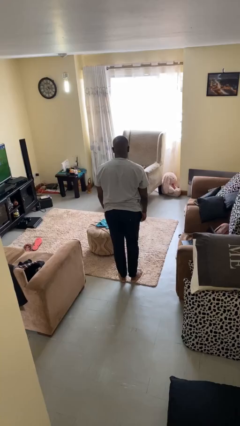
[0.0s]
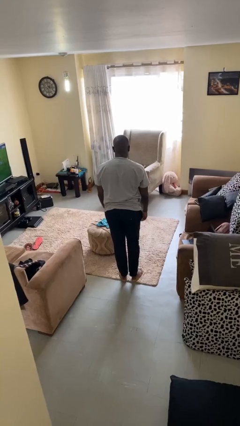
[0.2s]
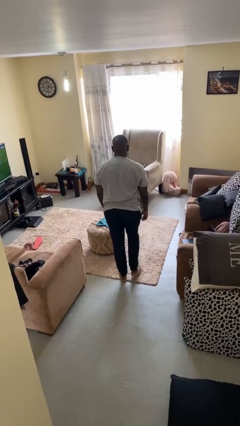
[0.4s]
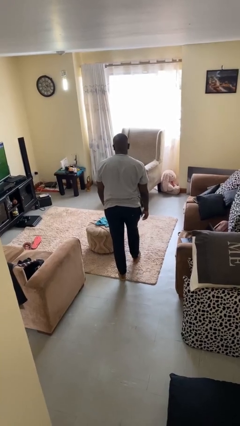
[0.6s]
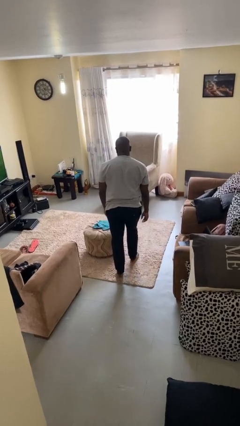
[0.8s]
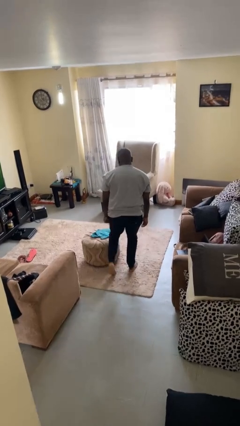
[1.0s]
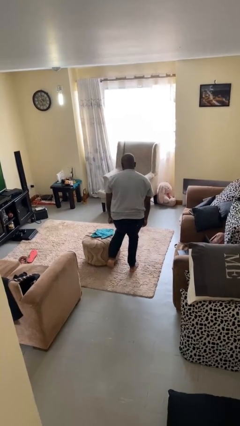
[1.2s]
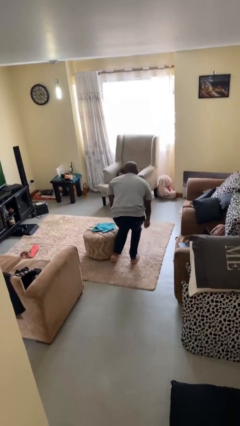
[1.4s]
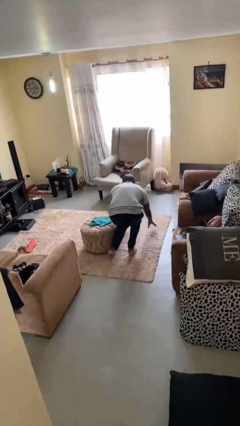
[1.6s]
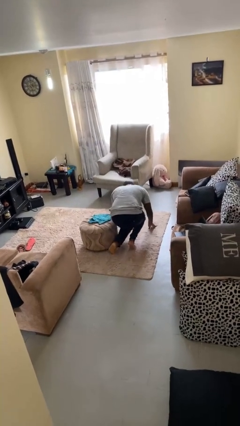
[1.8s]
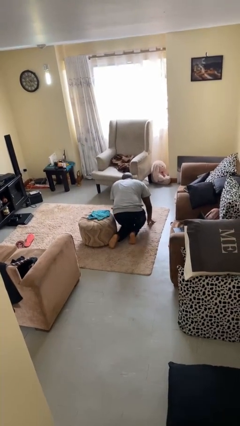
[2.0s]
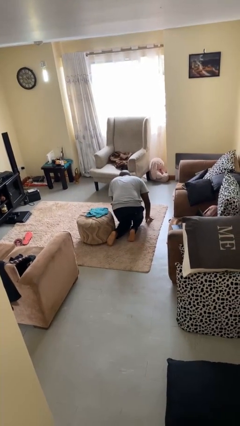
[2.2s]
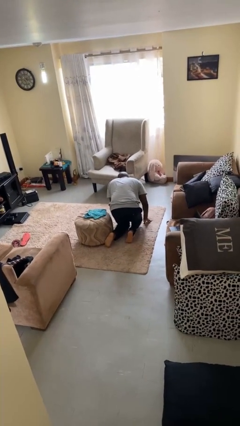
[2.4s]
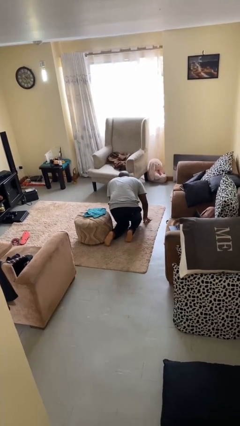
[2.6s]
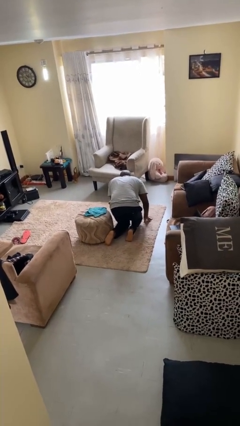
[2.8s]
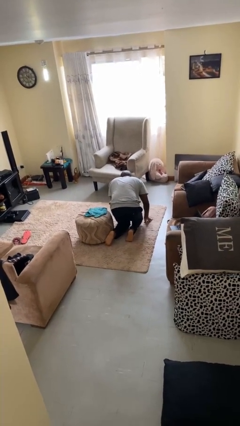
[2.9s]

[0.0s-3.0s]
person trips on object on floor

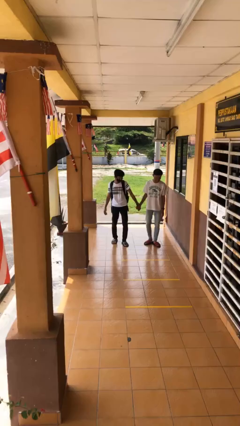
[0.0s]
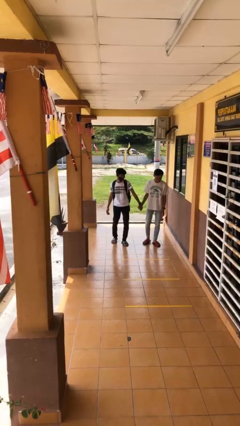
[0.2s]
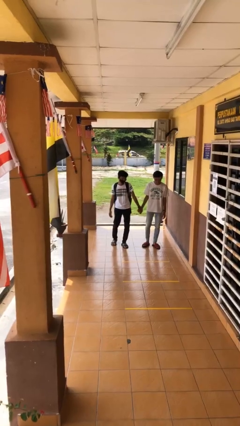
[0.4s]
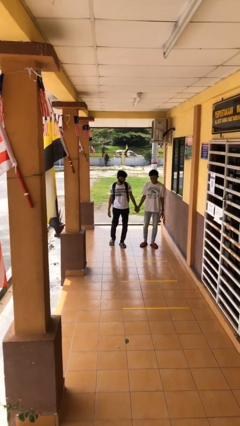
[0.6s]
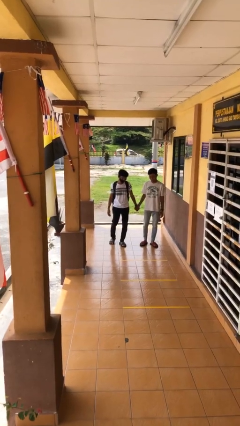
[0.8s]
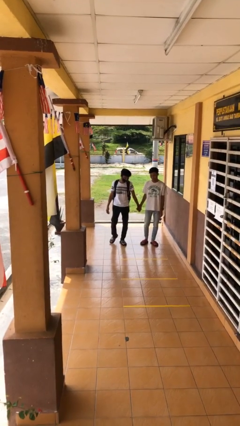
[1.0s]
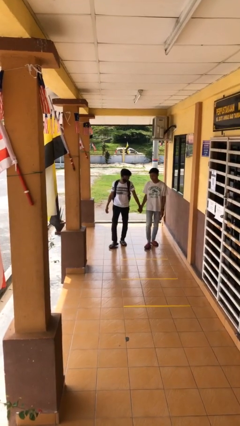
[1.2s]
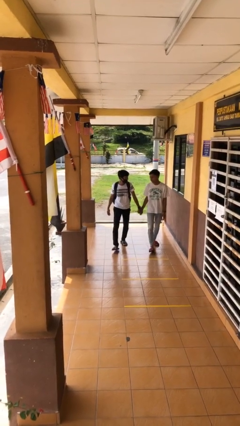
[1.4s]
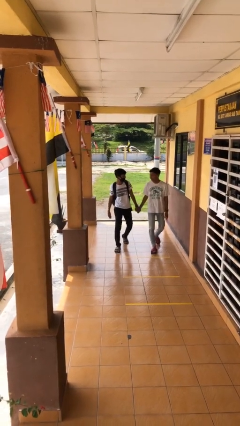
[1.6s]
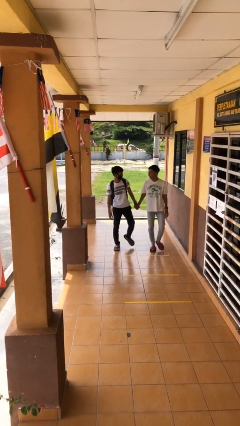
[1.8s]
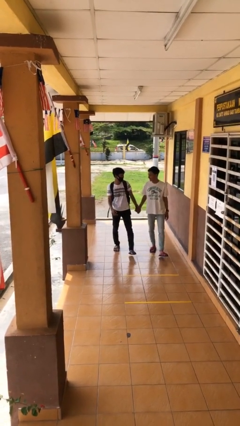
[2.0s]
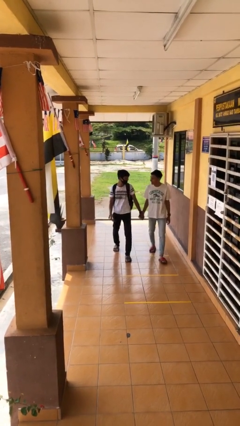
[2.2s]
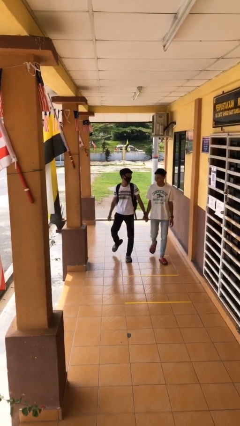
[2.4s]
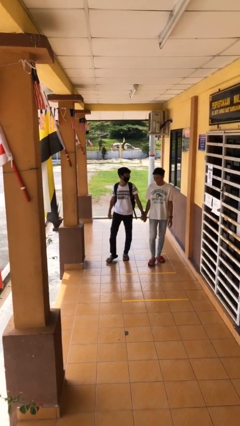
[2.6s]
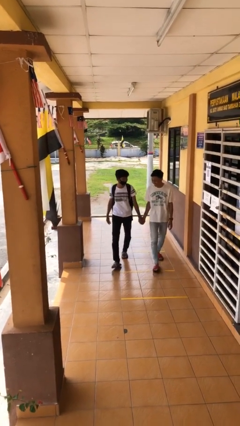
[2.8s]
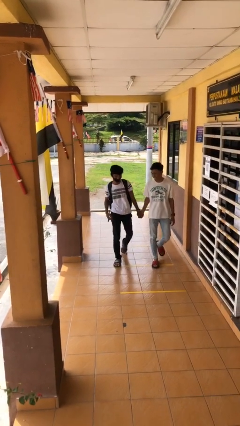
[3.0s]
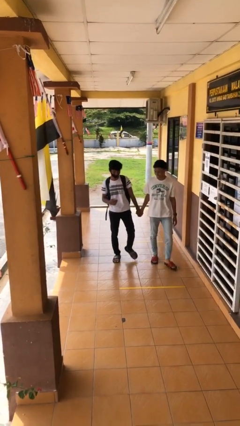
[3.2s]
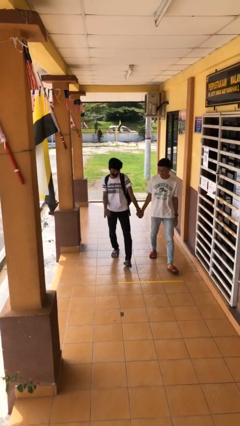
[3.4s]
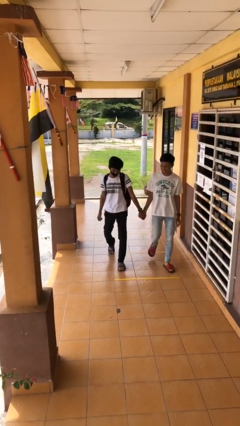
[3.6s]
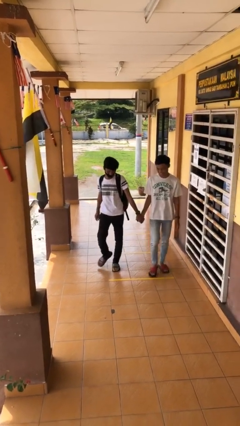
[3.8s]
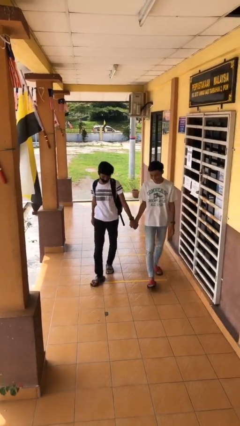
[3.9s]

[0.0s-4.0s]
person holds hand

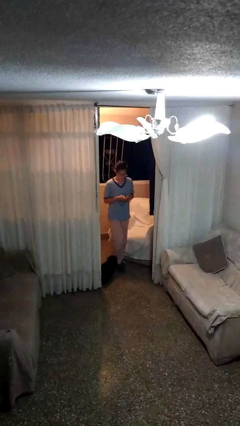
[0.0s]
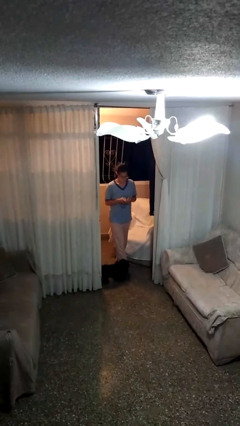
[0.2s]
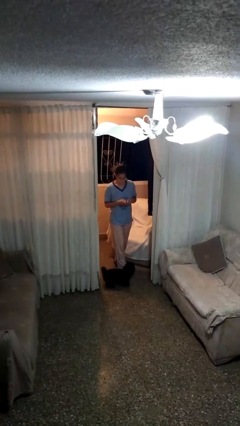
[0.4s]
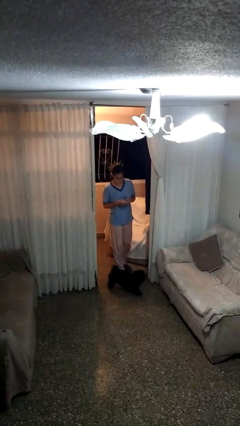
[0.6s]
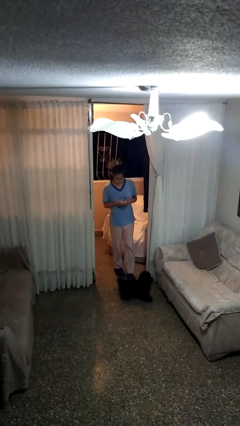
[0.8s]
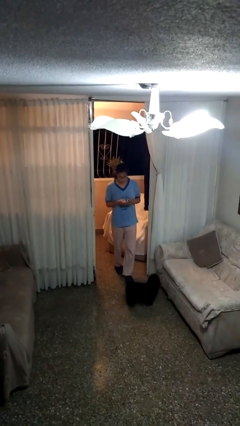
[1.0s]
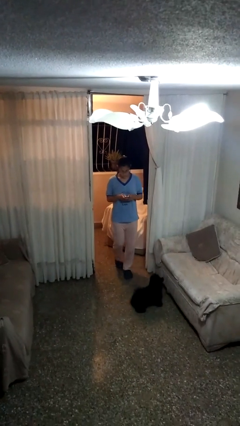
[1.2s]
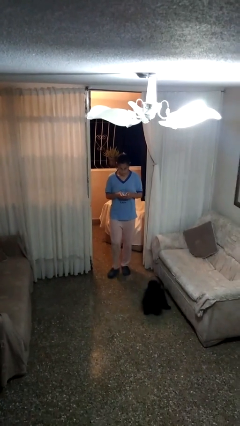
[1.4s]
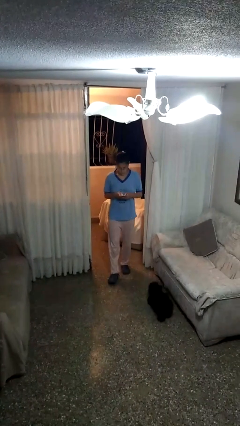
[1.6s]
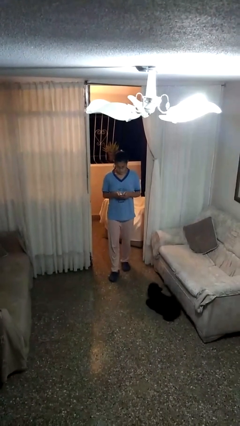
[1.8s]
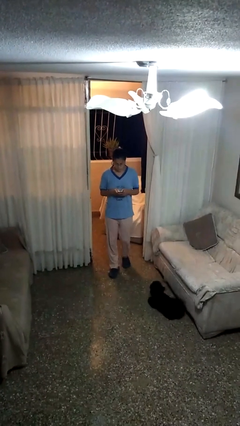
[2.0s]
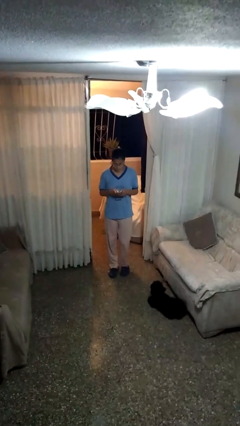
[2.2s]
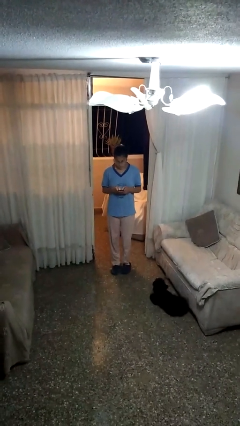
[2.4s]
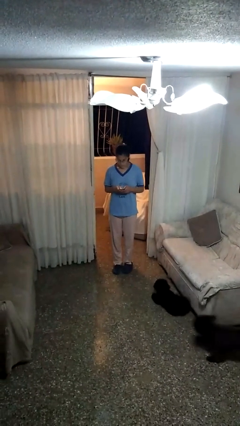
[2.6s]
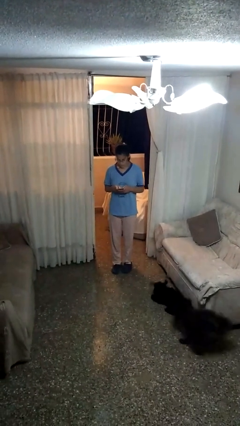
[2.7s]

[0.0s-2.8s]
person enters scene through structure

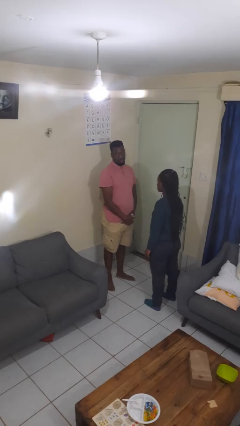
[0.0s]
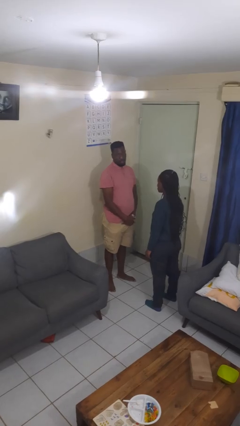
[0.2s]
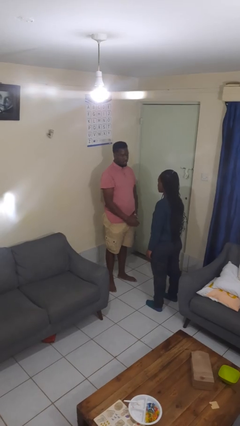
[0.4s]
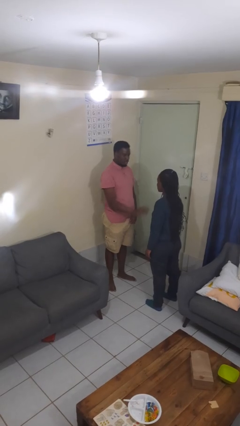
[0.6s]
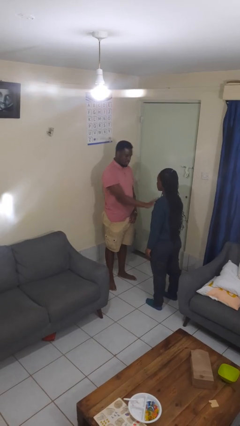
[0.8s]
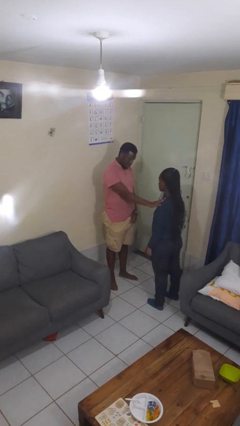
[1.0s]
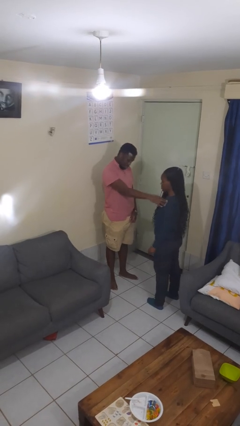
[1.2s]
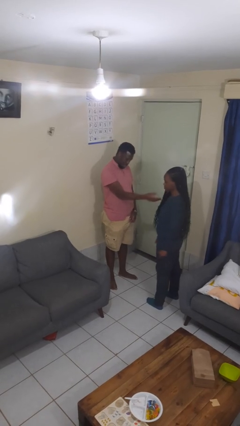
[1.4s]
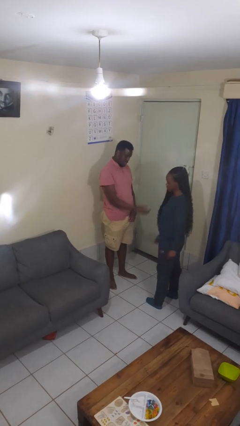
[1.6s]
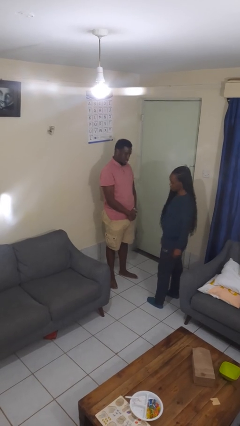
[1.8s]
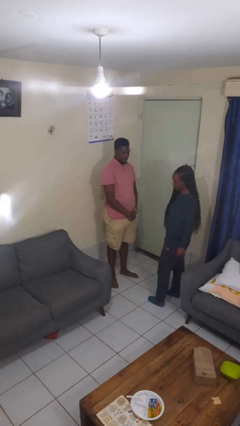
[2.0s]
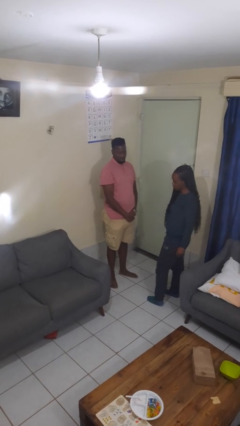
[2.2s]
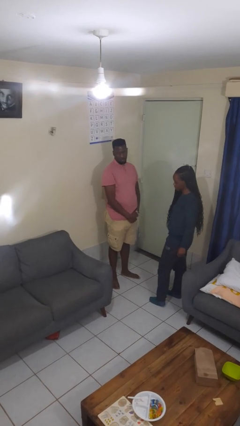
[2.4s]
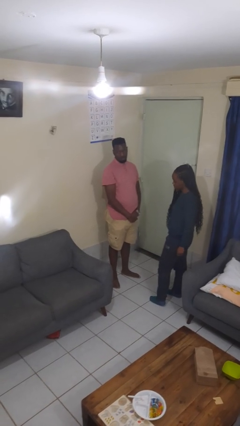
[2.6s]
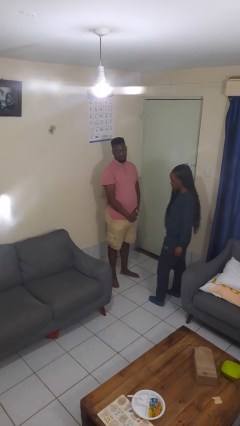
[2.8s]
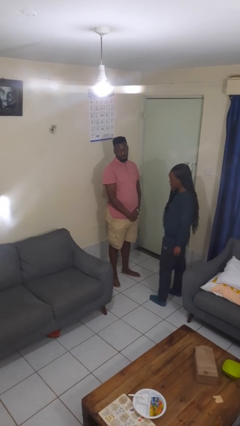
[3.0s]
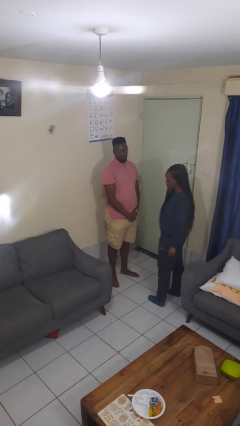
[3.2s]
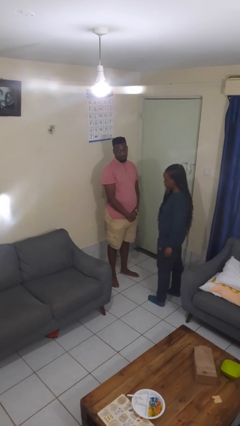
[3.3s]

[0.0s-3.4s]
person shoves person

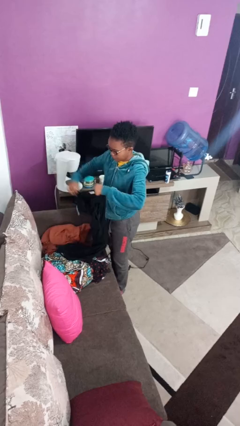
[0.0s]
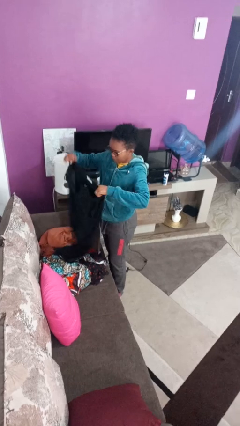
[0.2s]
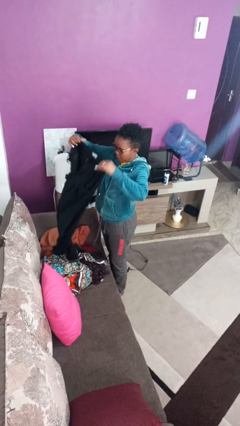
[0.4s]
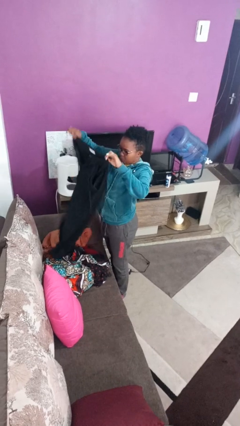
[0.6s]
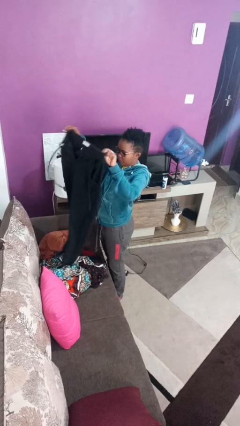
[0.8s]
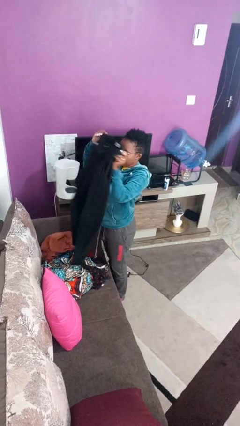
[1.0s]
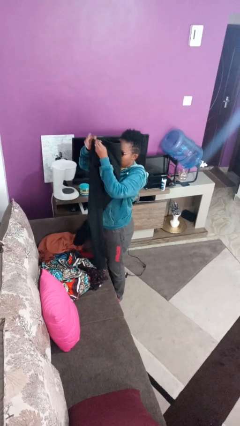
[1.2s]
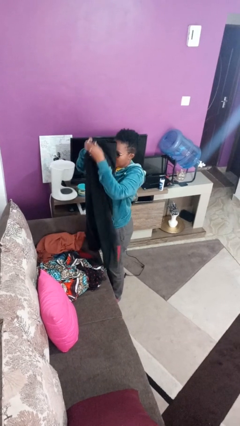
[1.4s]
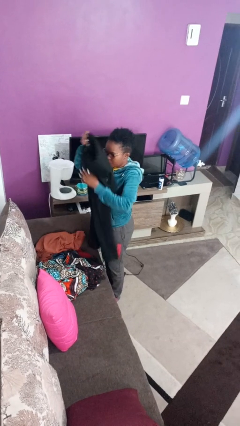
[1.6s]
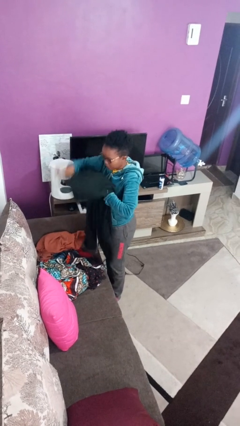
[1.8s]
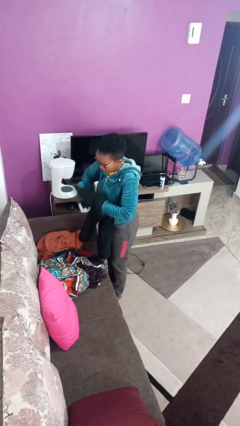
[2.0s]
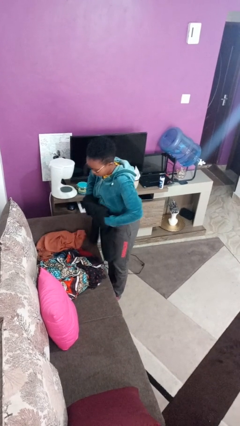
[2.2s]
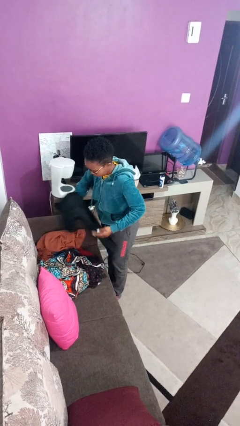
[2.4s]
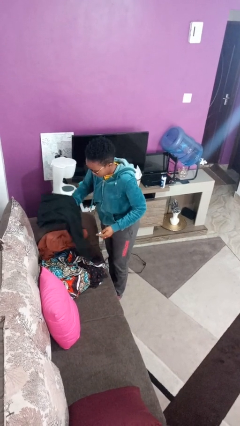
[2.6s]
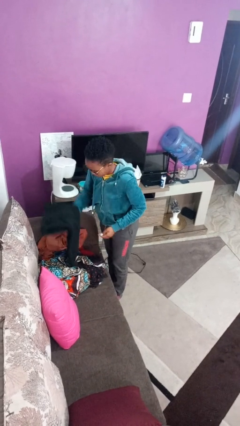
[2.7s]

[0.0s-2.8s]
person folds pants

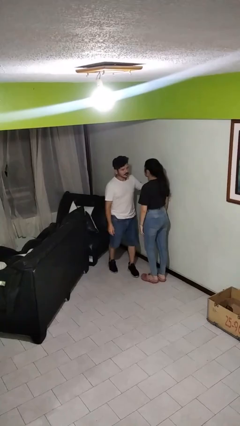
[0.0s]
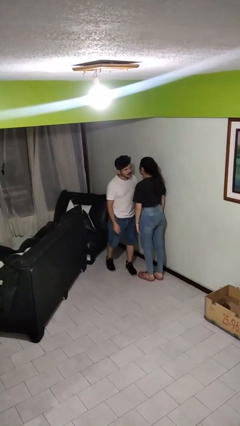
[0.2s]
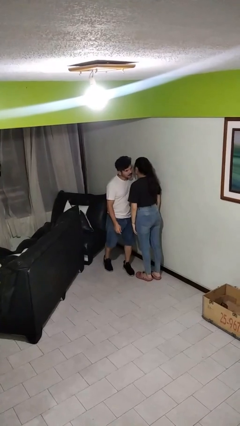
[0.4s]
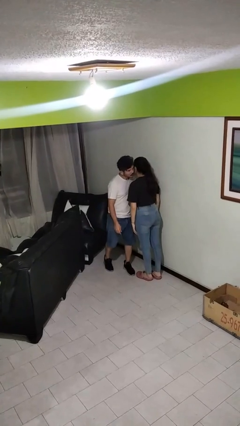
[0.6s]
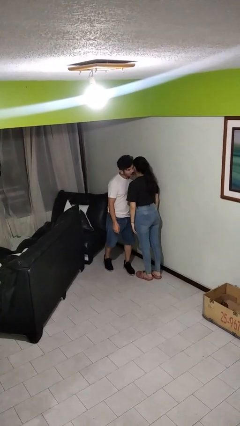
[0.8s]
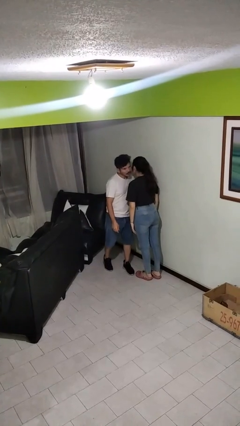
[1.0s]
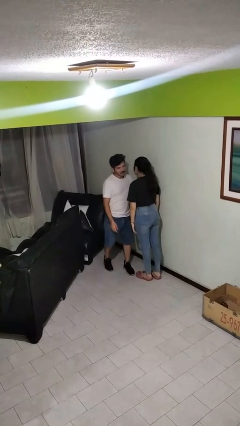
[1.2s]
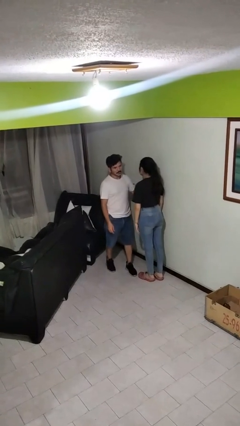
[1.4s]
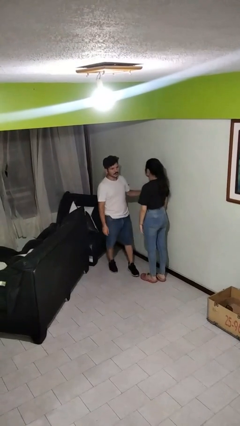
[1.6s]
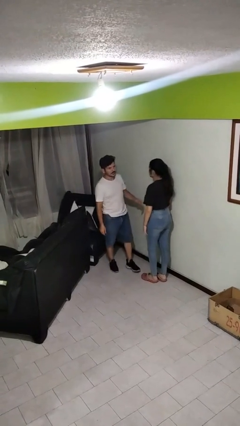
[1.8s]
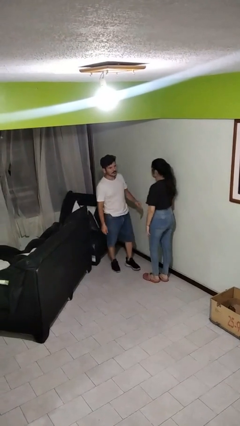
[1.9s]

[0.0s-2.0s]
person kisses cheek of person
